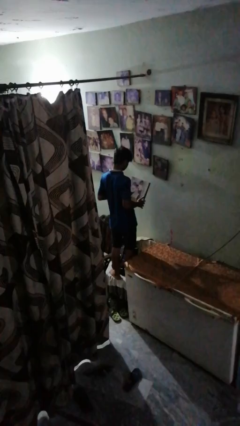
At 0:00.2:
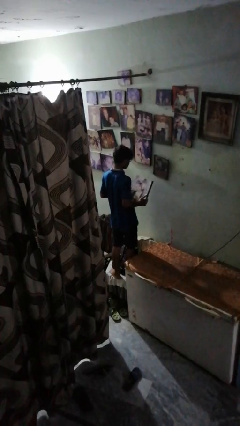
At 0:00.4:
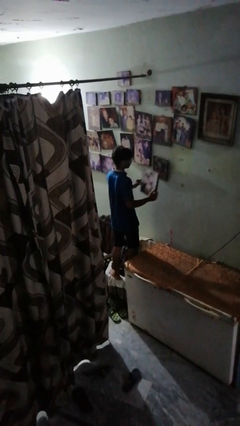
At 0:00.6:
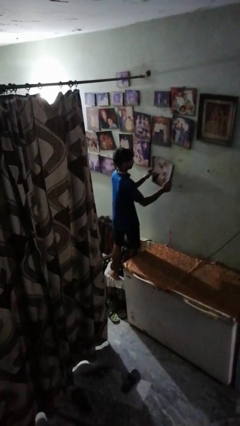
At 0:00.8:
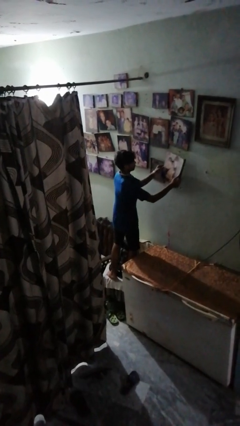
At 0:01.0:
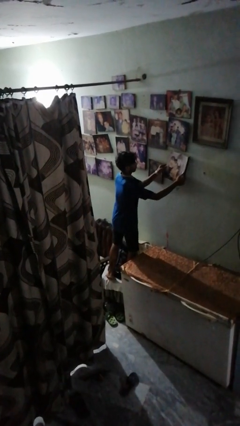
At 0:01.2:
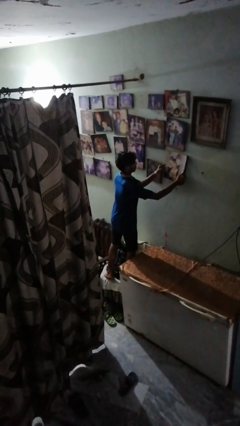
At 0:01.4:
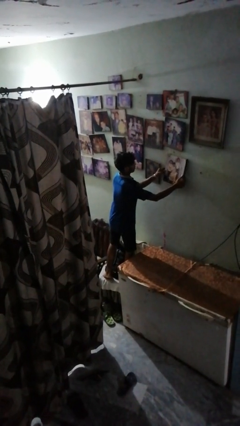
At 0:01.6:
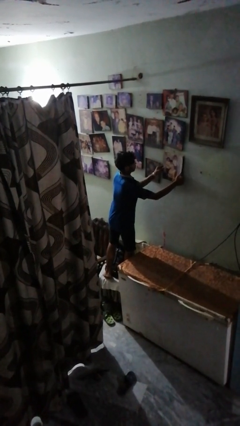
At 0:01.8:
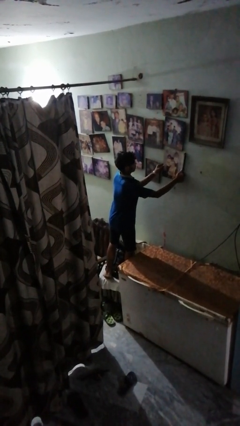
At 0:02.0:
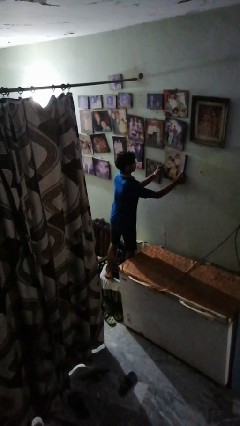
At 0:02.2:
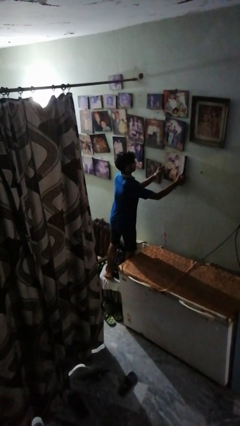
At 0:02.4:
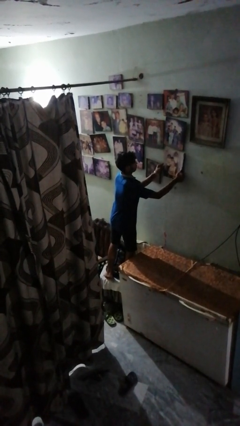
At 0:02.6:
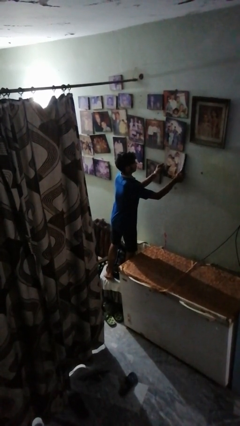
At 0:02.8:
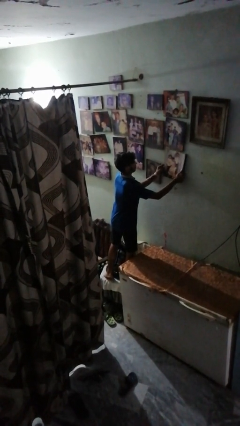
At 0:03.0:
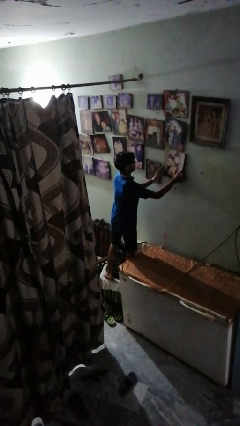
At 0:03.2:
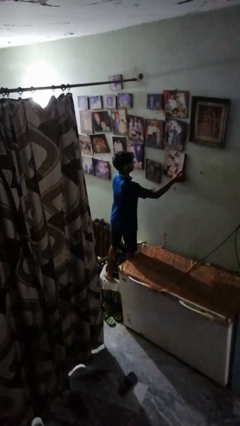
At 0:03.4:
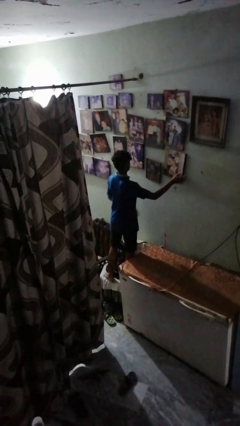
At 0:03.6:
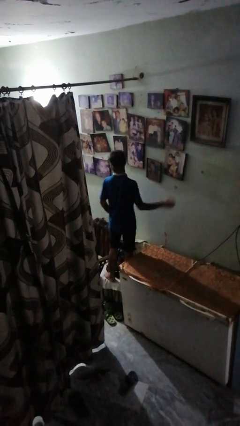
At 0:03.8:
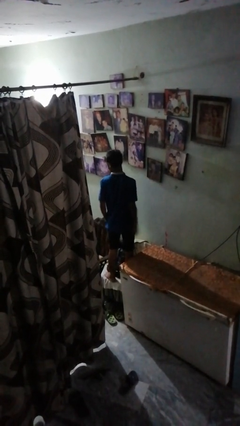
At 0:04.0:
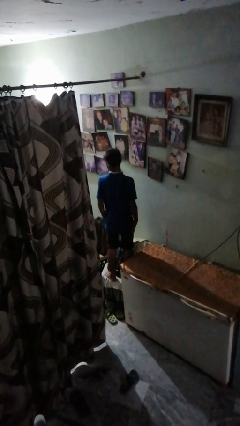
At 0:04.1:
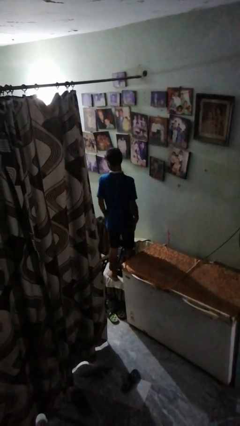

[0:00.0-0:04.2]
person puts up picture frame

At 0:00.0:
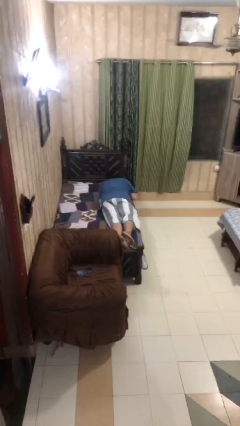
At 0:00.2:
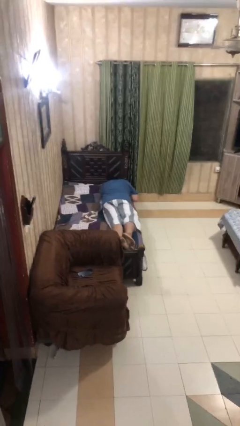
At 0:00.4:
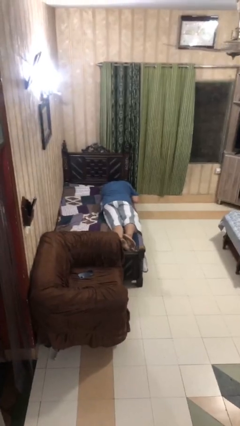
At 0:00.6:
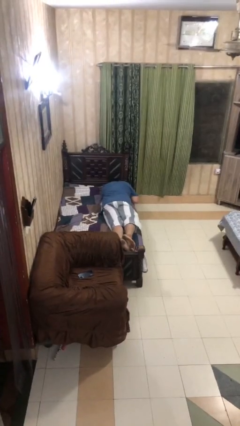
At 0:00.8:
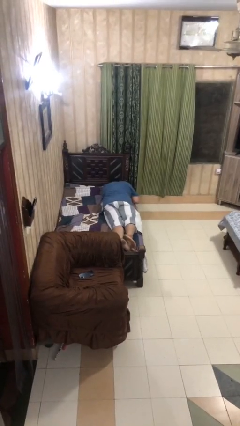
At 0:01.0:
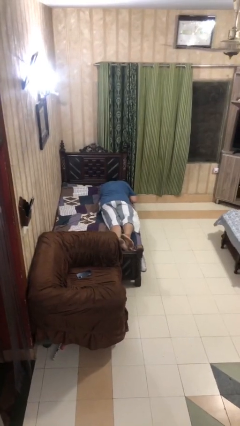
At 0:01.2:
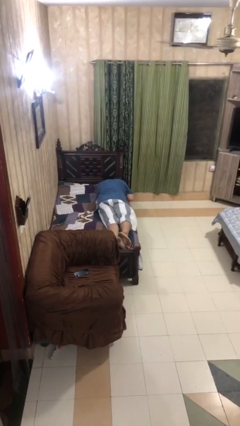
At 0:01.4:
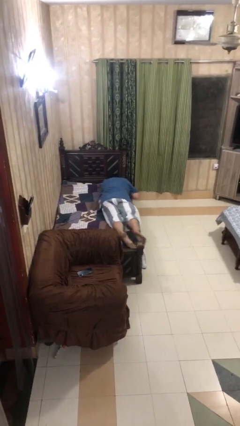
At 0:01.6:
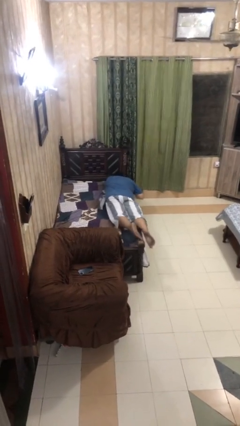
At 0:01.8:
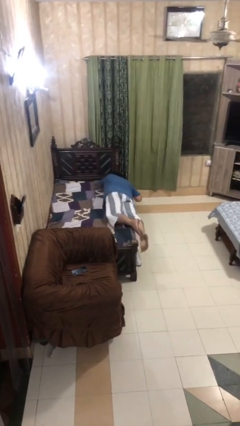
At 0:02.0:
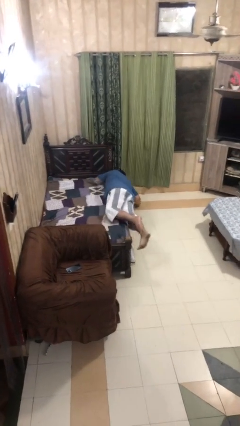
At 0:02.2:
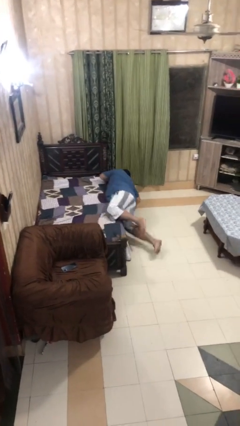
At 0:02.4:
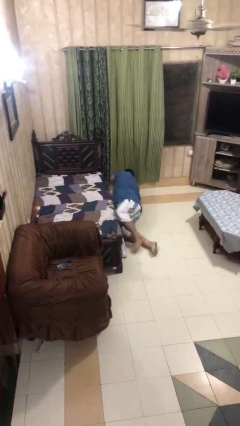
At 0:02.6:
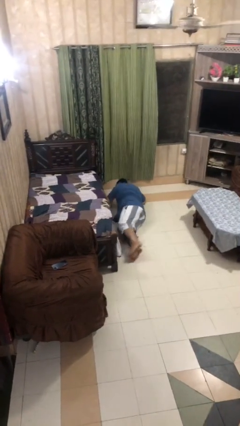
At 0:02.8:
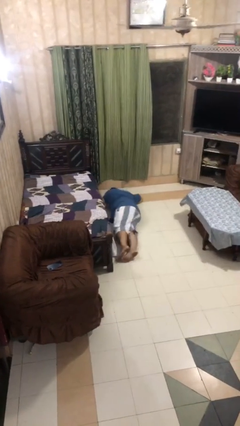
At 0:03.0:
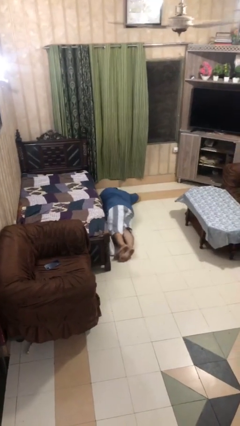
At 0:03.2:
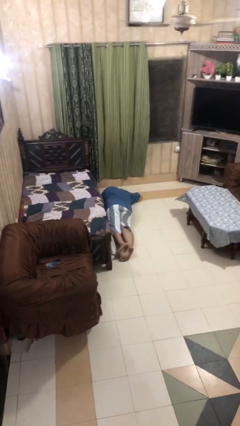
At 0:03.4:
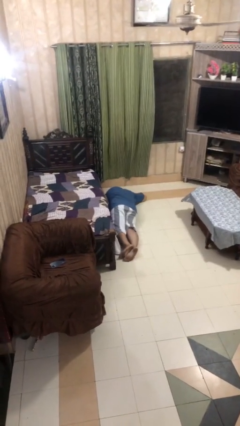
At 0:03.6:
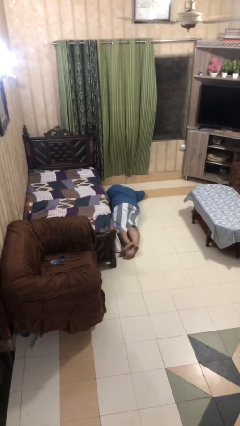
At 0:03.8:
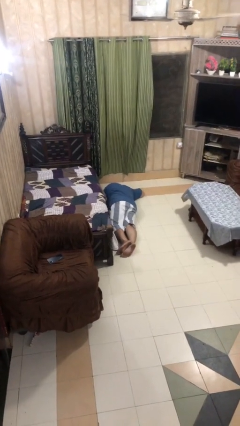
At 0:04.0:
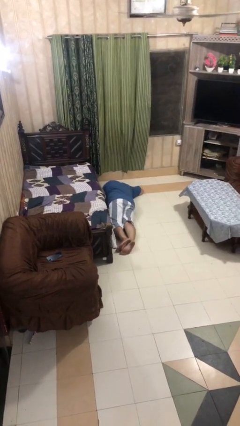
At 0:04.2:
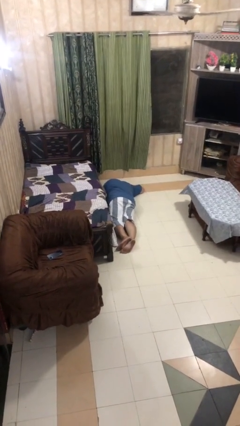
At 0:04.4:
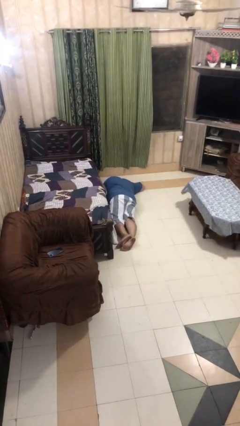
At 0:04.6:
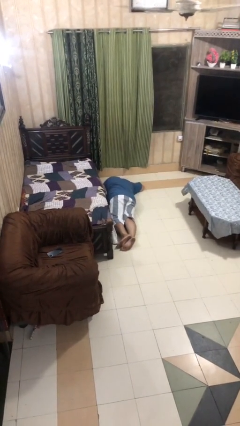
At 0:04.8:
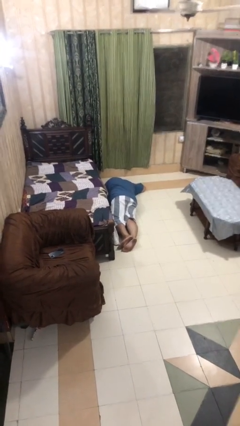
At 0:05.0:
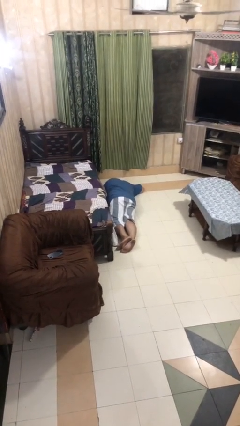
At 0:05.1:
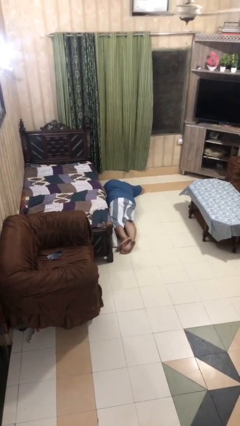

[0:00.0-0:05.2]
person falls from bed

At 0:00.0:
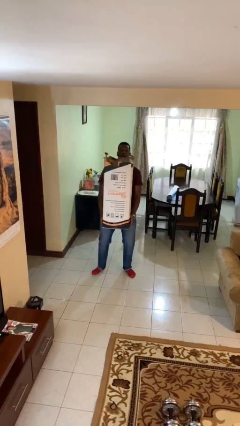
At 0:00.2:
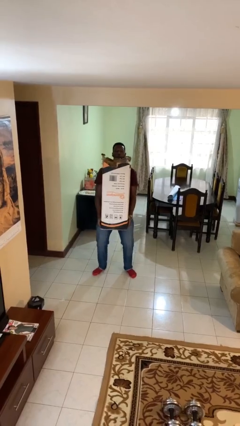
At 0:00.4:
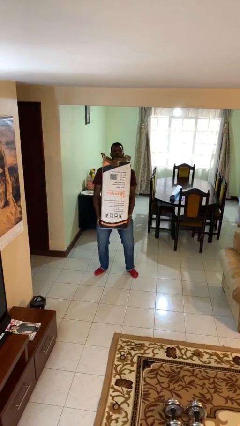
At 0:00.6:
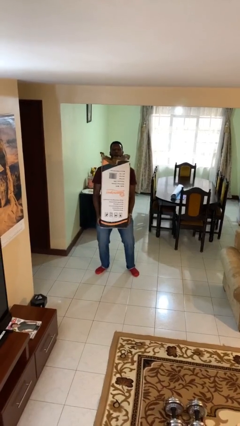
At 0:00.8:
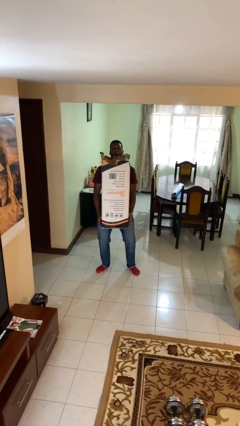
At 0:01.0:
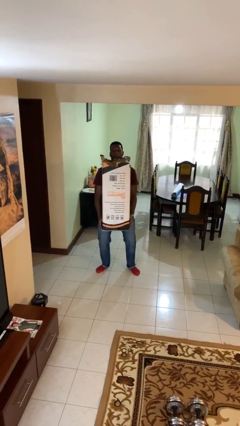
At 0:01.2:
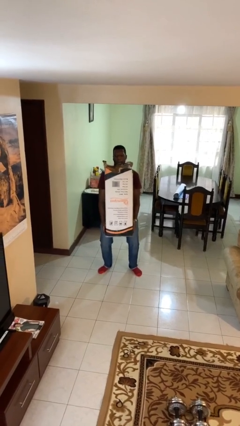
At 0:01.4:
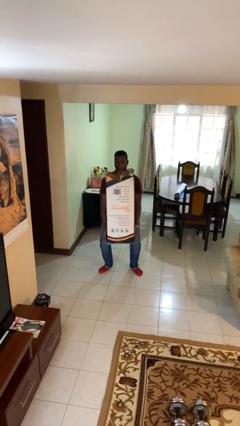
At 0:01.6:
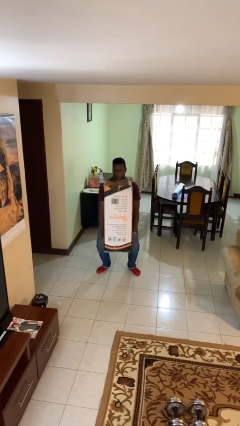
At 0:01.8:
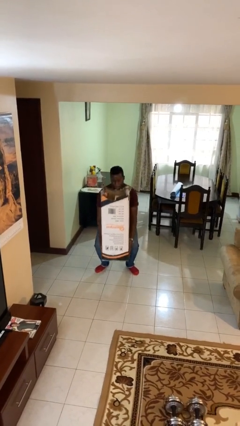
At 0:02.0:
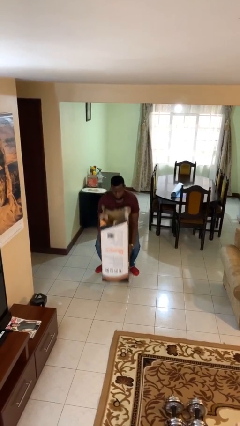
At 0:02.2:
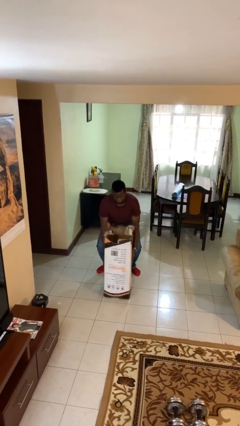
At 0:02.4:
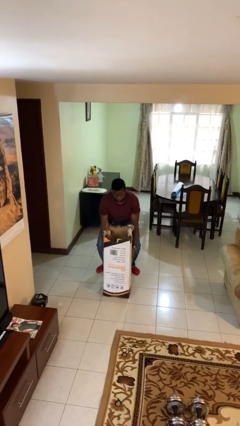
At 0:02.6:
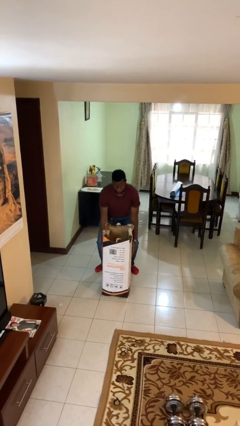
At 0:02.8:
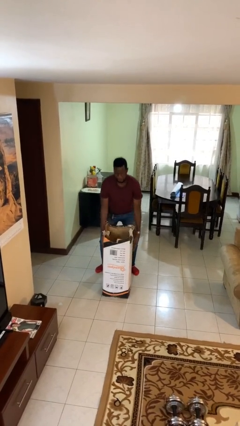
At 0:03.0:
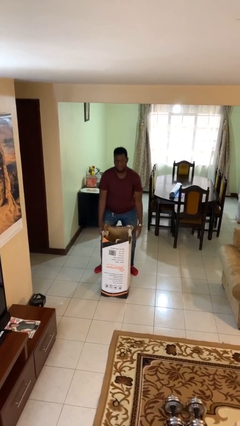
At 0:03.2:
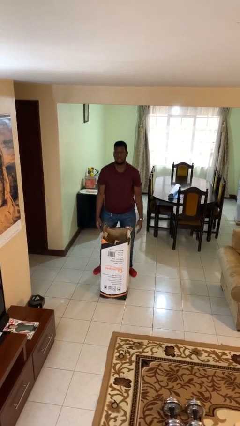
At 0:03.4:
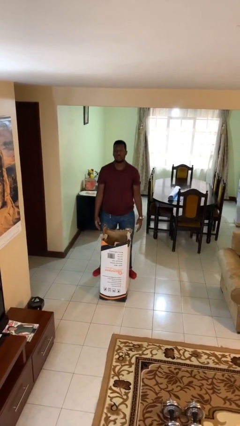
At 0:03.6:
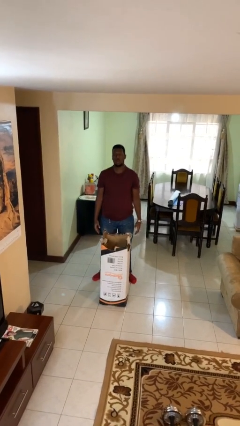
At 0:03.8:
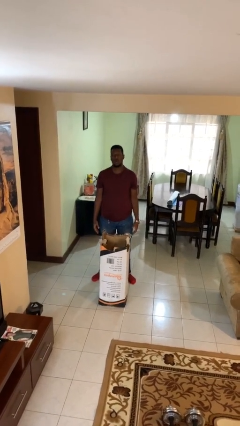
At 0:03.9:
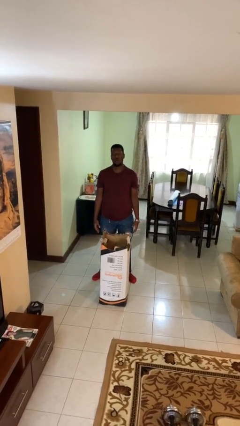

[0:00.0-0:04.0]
person puts down object on floor

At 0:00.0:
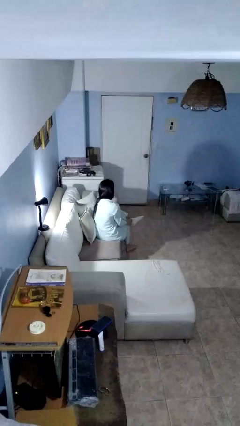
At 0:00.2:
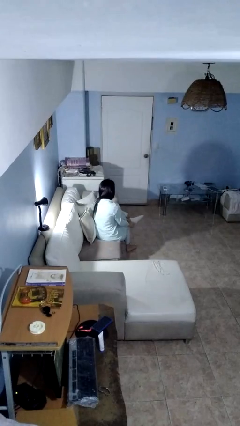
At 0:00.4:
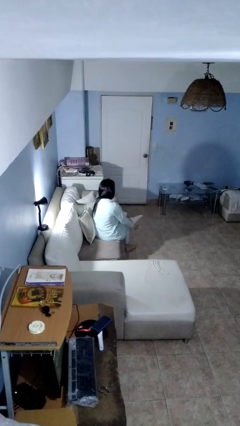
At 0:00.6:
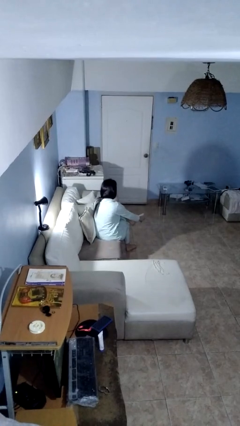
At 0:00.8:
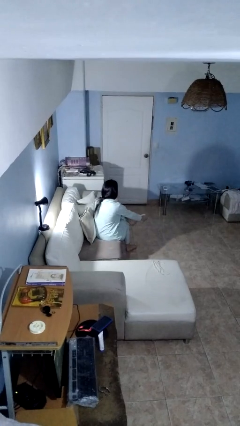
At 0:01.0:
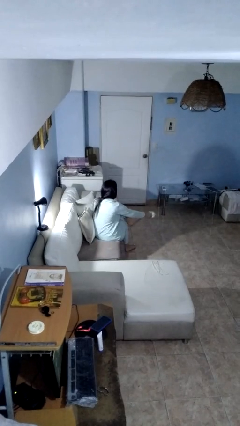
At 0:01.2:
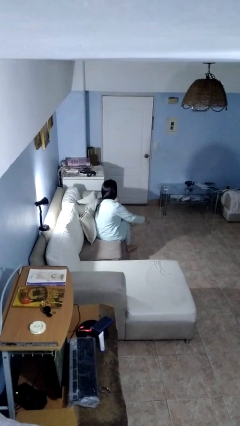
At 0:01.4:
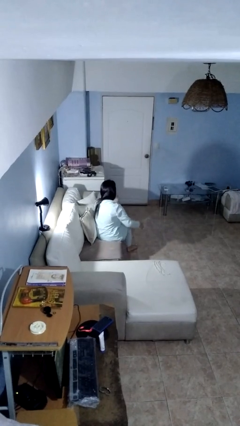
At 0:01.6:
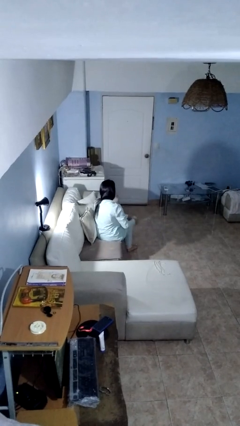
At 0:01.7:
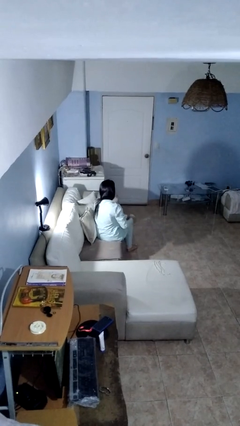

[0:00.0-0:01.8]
person takes off socks

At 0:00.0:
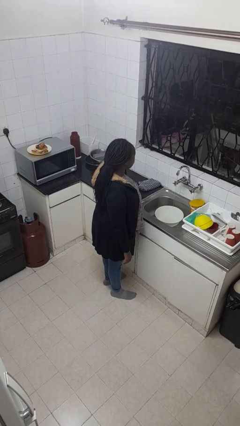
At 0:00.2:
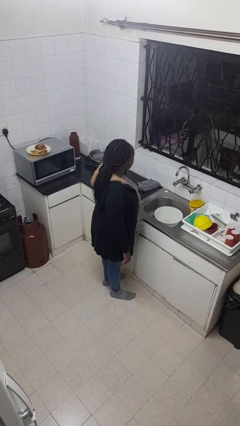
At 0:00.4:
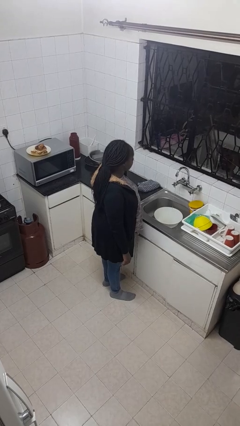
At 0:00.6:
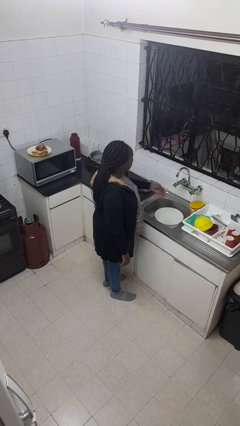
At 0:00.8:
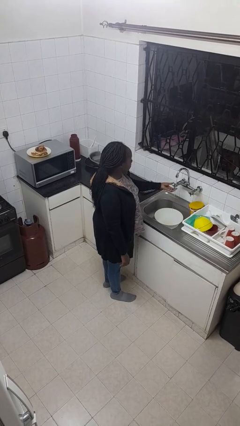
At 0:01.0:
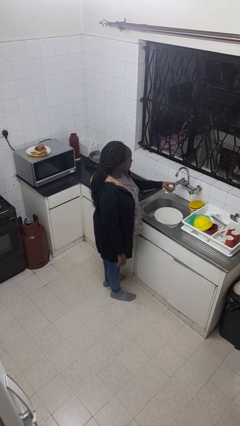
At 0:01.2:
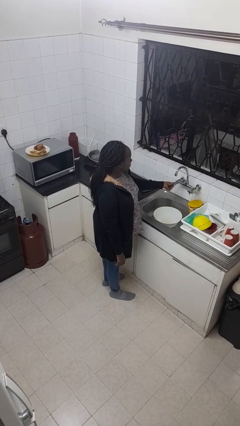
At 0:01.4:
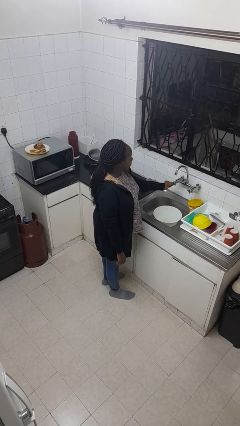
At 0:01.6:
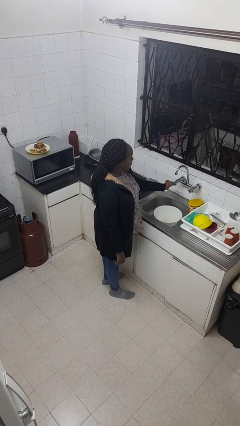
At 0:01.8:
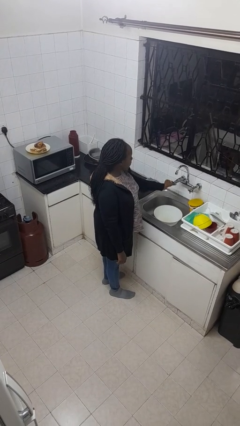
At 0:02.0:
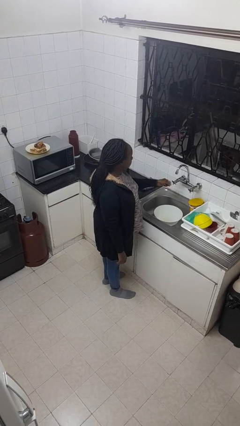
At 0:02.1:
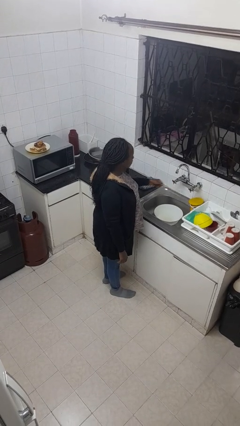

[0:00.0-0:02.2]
person turns off faucet
